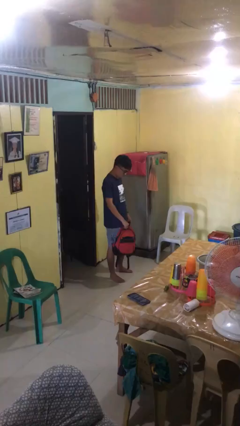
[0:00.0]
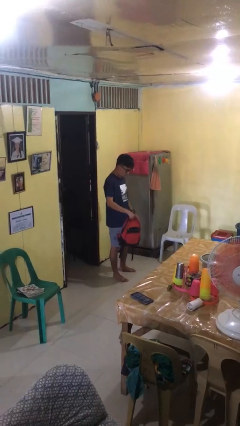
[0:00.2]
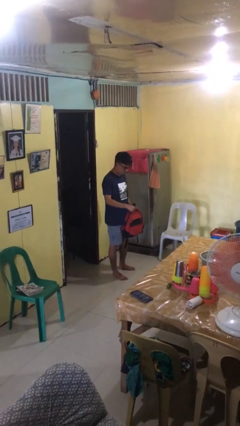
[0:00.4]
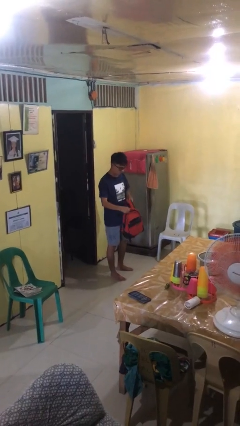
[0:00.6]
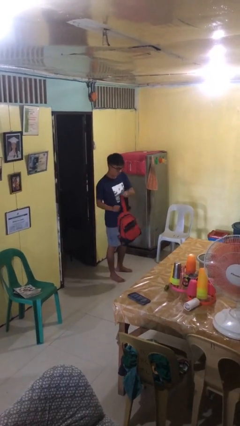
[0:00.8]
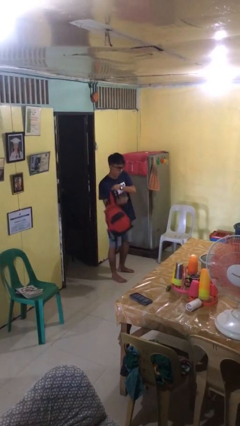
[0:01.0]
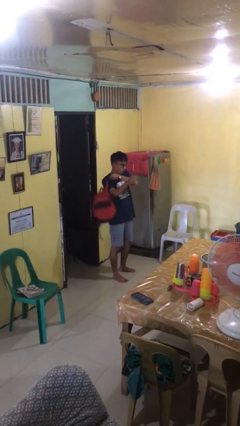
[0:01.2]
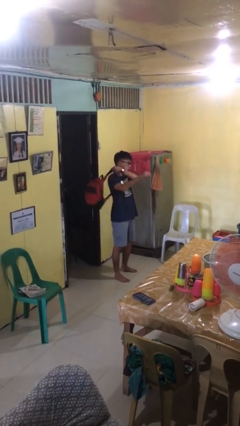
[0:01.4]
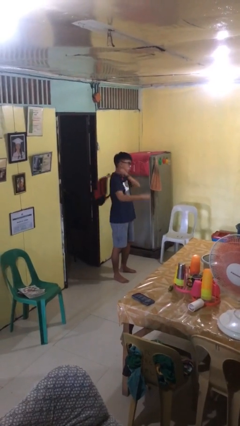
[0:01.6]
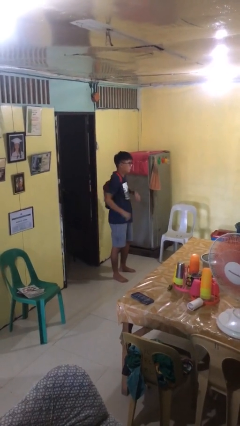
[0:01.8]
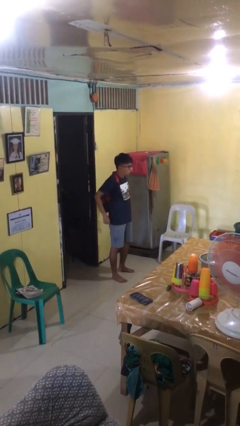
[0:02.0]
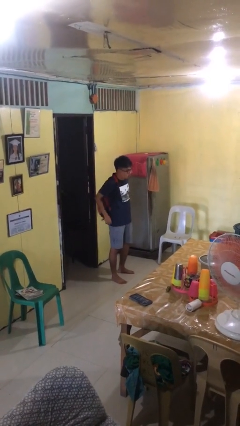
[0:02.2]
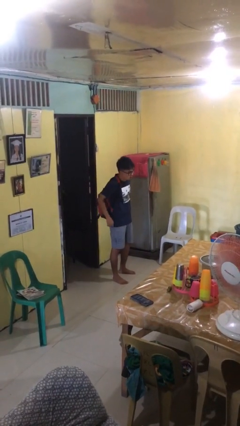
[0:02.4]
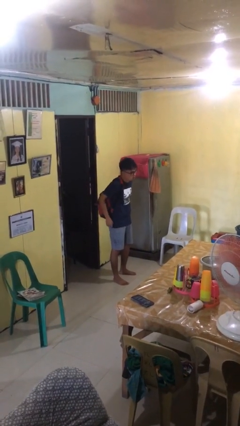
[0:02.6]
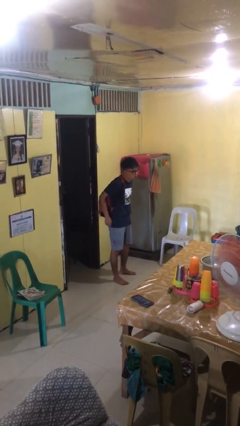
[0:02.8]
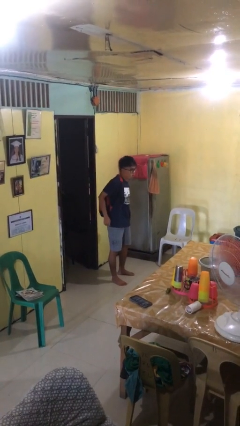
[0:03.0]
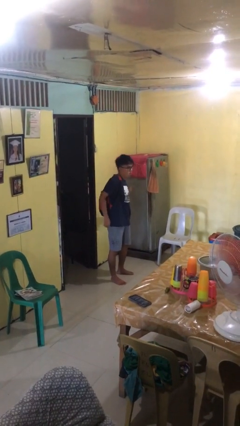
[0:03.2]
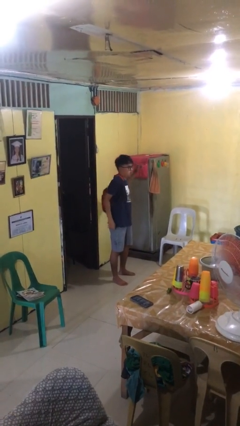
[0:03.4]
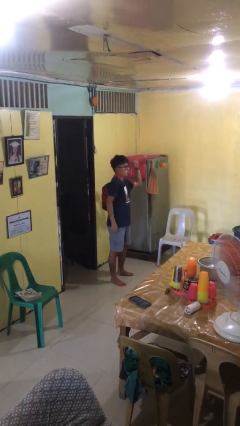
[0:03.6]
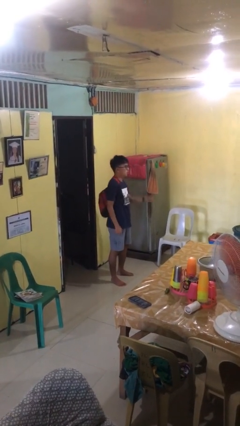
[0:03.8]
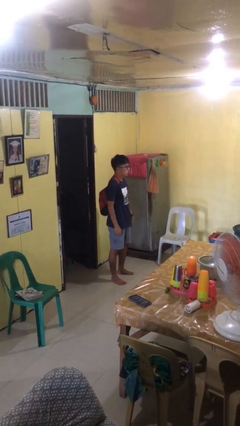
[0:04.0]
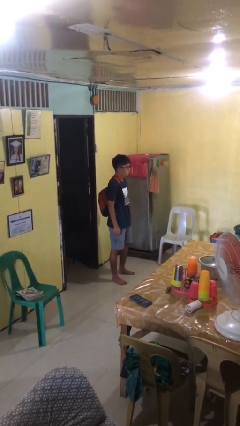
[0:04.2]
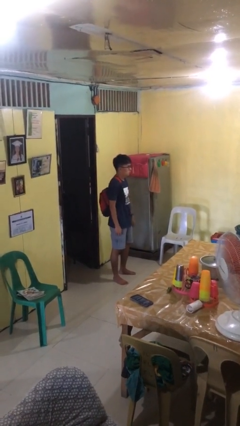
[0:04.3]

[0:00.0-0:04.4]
person puts on backpack

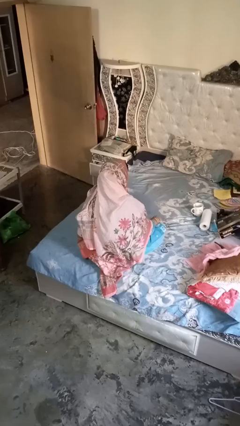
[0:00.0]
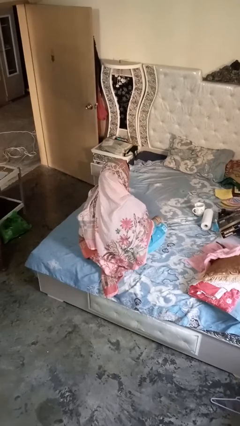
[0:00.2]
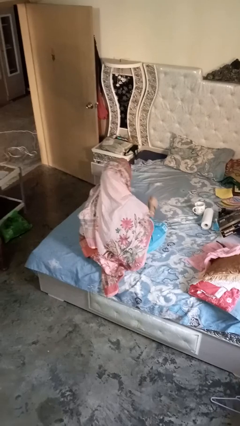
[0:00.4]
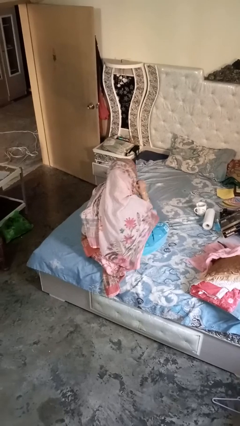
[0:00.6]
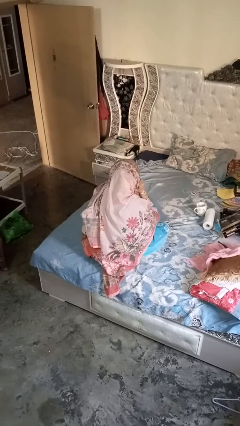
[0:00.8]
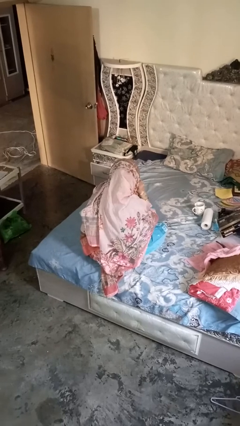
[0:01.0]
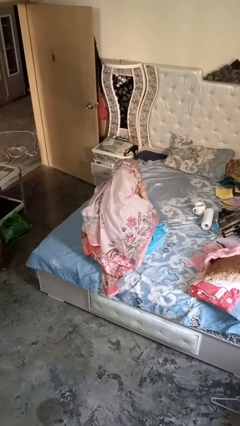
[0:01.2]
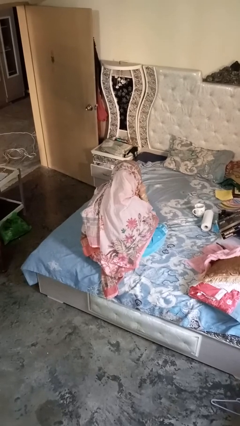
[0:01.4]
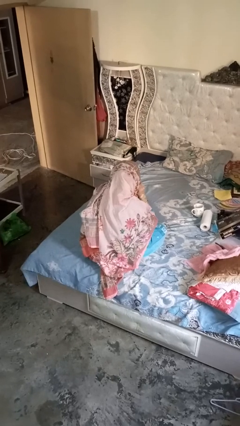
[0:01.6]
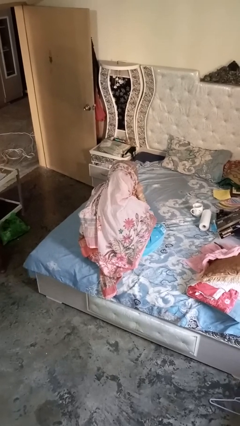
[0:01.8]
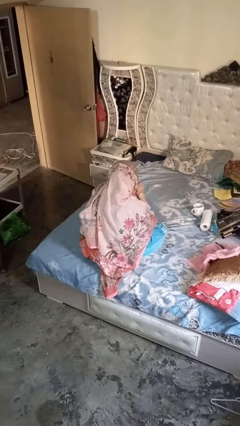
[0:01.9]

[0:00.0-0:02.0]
person gestures listen closely

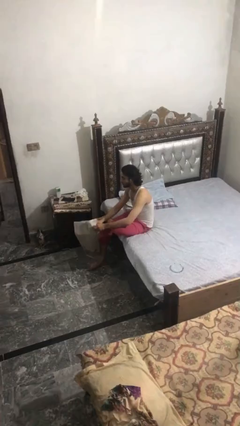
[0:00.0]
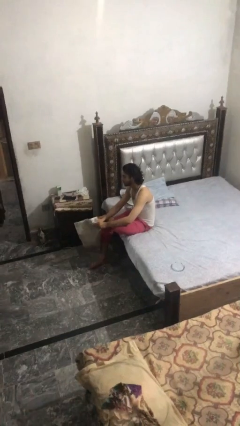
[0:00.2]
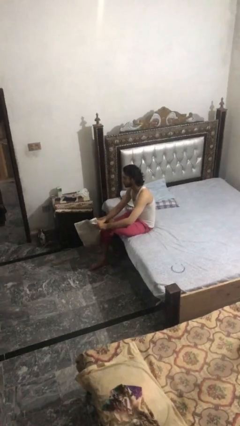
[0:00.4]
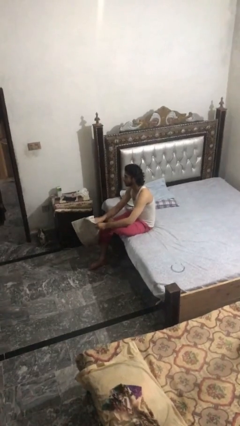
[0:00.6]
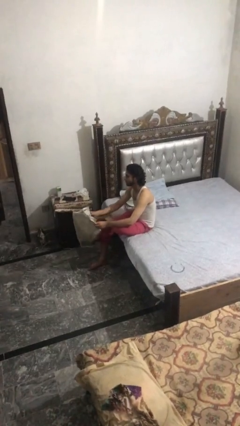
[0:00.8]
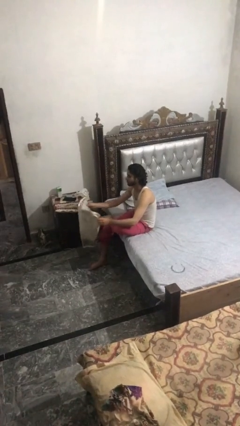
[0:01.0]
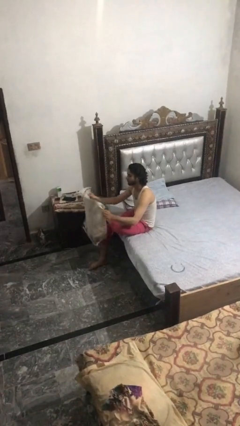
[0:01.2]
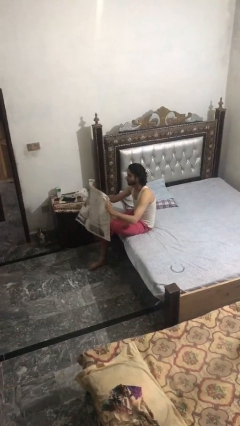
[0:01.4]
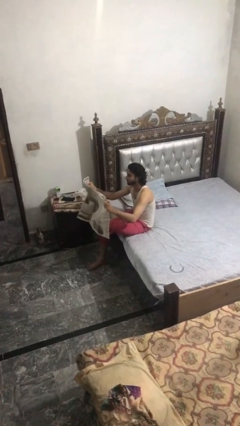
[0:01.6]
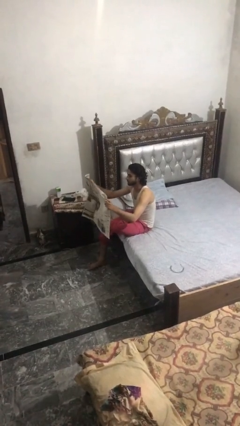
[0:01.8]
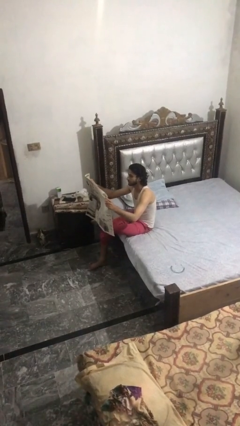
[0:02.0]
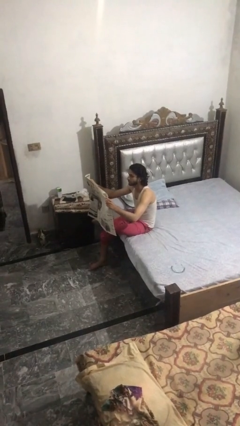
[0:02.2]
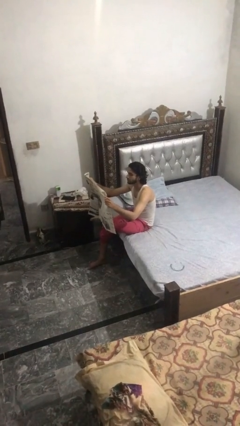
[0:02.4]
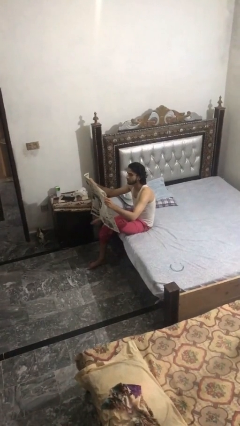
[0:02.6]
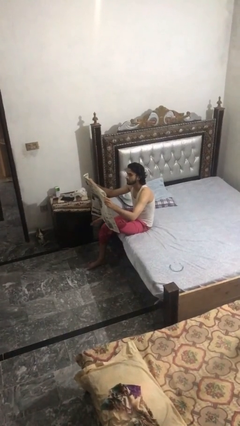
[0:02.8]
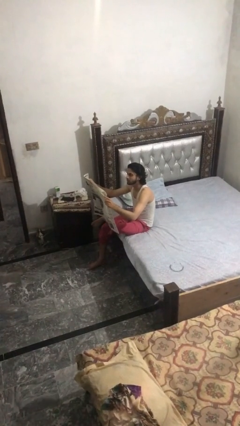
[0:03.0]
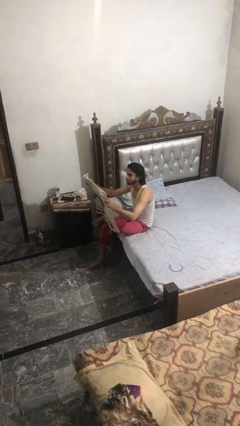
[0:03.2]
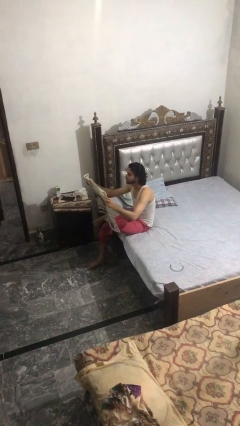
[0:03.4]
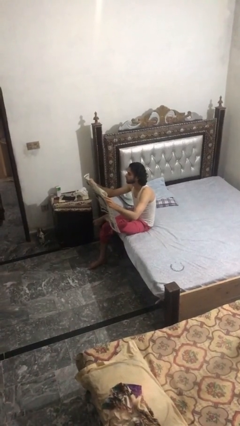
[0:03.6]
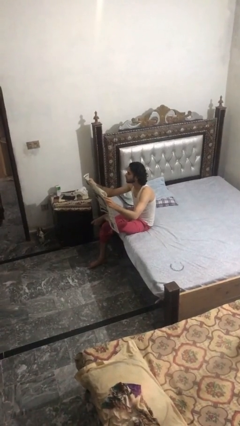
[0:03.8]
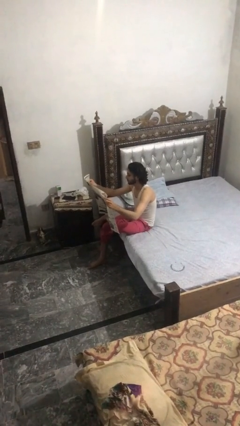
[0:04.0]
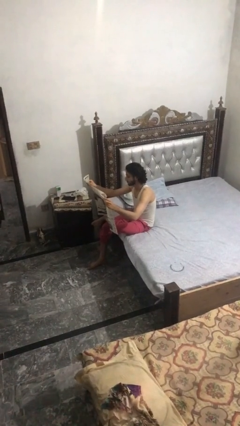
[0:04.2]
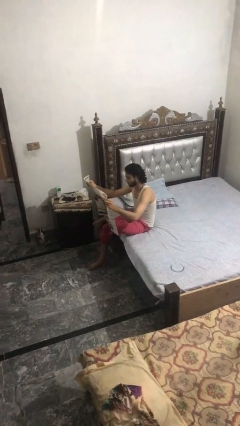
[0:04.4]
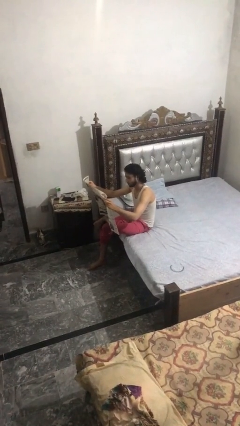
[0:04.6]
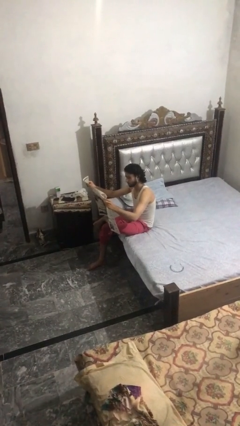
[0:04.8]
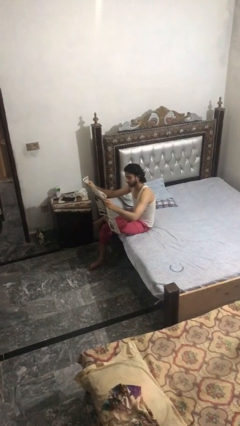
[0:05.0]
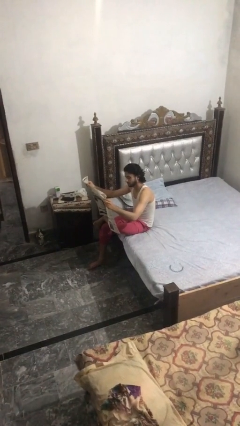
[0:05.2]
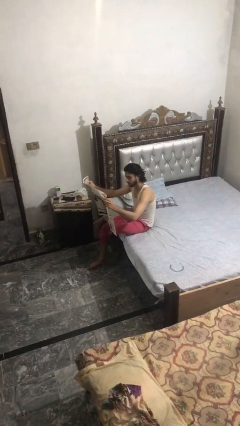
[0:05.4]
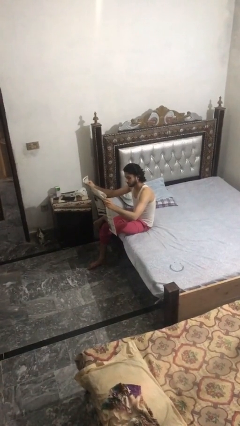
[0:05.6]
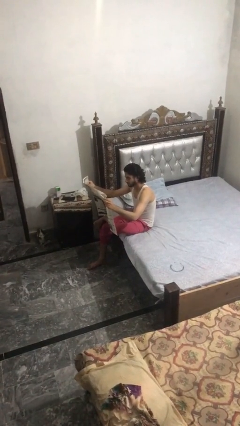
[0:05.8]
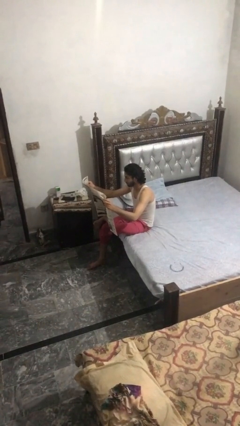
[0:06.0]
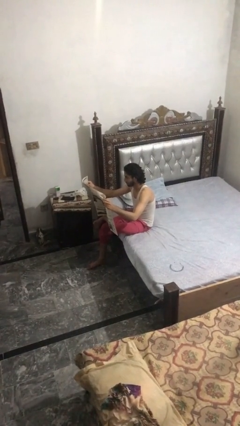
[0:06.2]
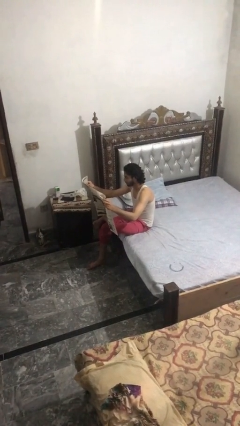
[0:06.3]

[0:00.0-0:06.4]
person reads newspaper

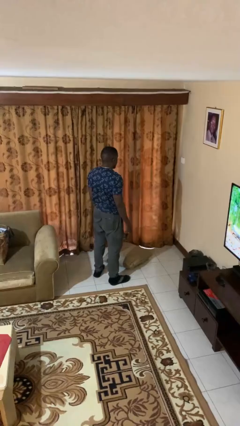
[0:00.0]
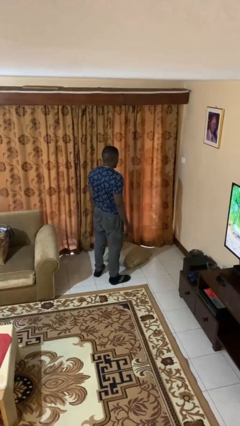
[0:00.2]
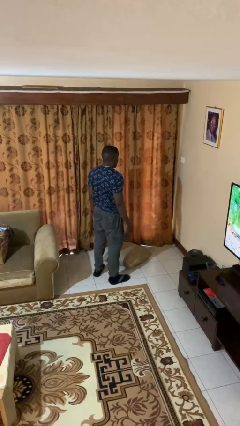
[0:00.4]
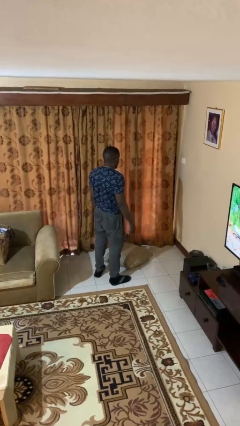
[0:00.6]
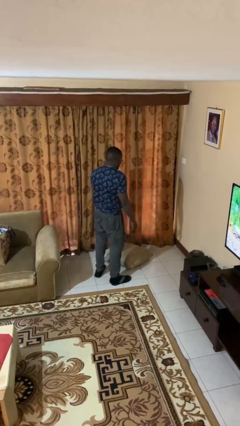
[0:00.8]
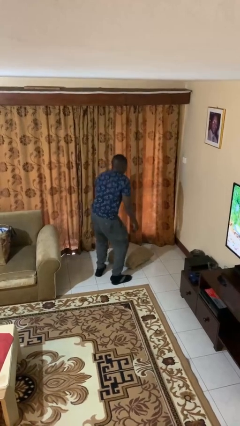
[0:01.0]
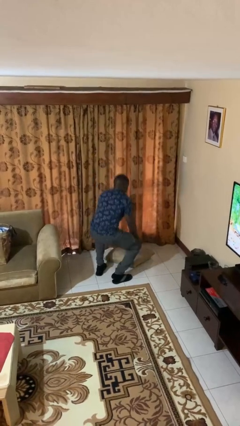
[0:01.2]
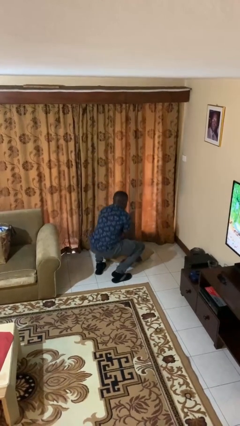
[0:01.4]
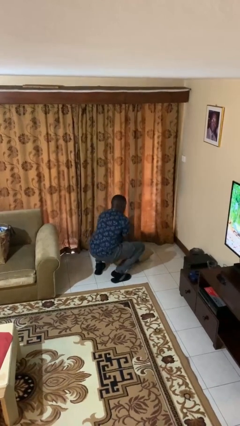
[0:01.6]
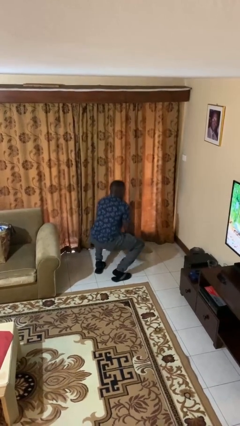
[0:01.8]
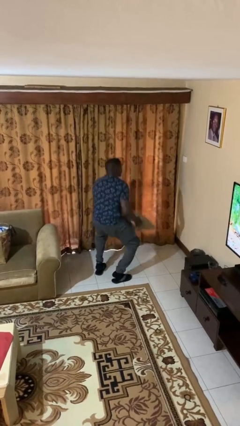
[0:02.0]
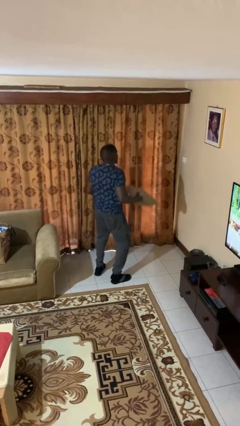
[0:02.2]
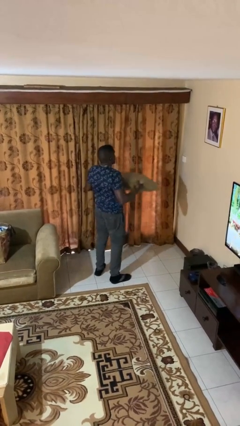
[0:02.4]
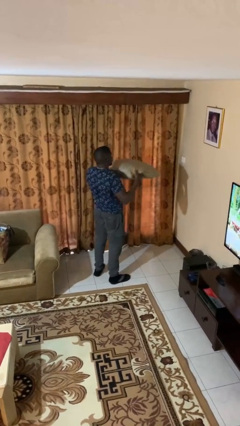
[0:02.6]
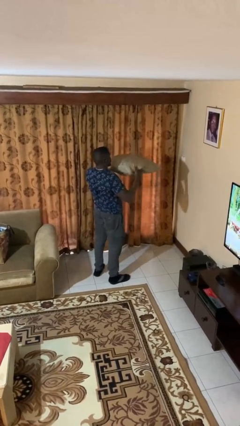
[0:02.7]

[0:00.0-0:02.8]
person picks up object from floor

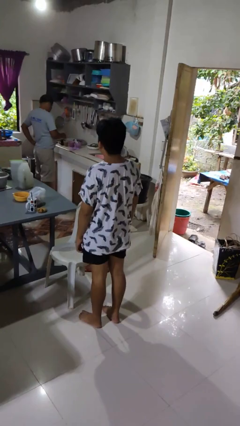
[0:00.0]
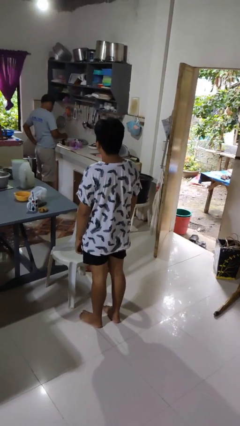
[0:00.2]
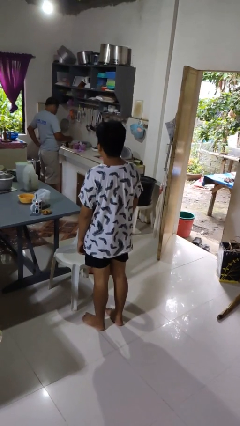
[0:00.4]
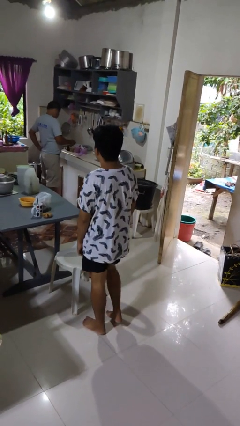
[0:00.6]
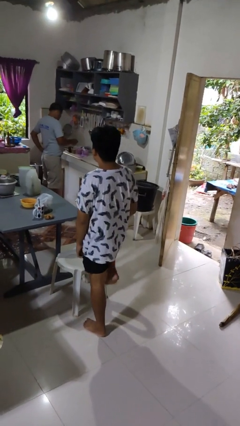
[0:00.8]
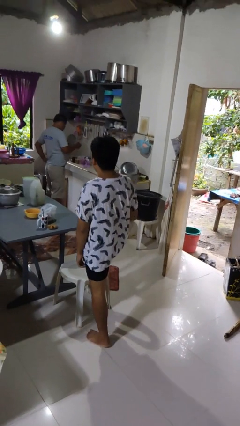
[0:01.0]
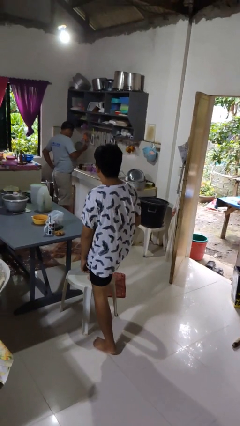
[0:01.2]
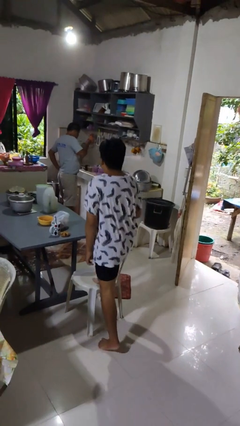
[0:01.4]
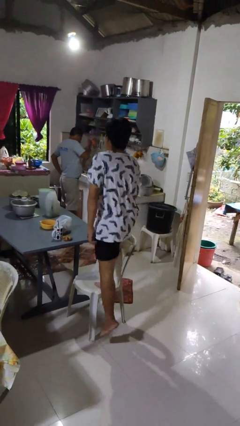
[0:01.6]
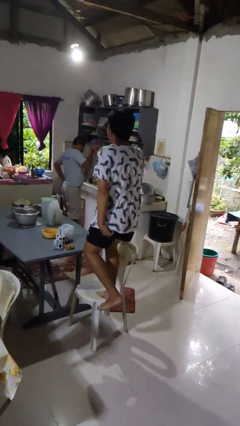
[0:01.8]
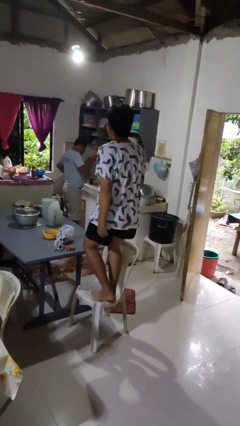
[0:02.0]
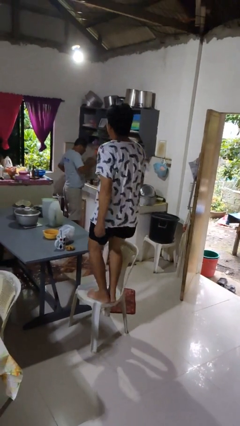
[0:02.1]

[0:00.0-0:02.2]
person climbs on chair
